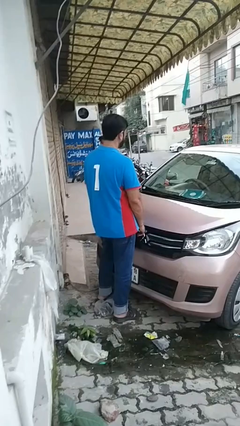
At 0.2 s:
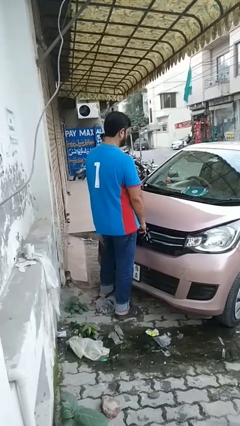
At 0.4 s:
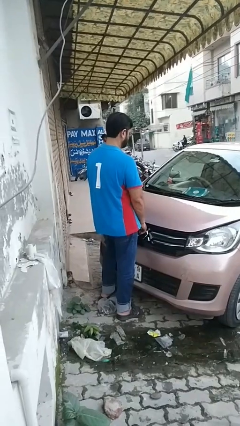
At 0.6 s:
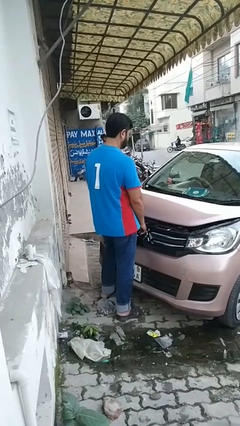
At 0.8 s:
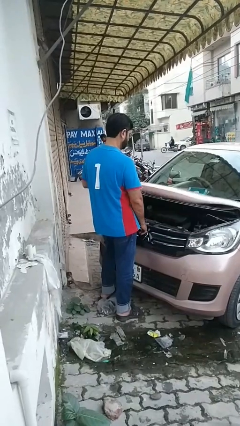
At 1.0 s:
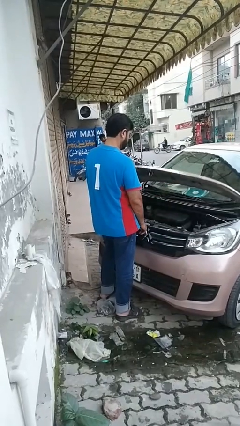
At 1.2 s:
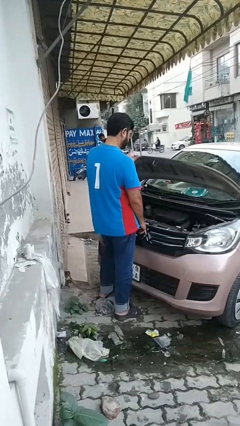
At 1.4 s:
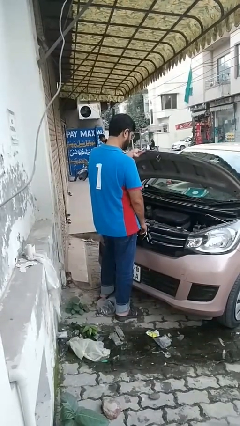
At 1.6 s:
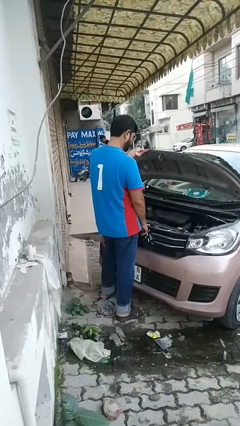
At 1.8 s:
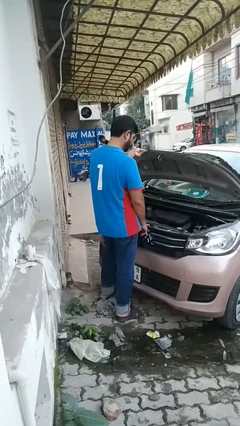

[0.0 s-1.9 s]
person opens car hood

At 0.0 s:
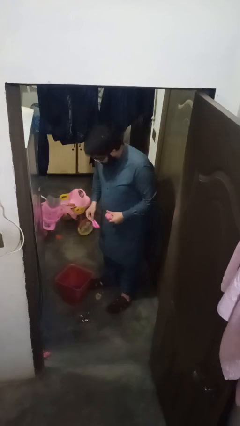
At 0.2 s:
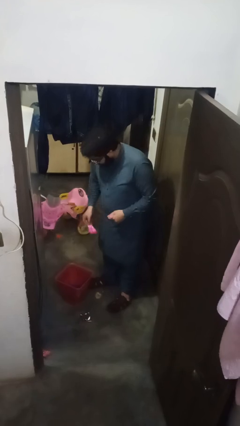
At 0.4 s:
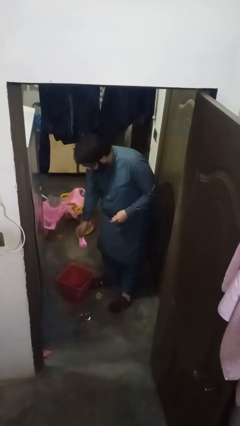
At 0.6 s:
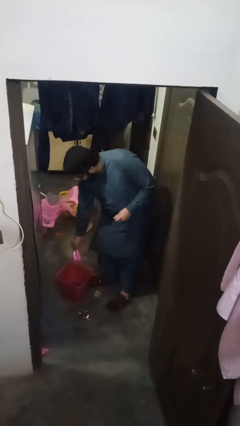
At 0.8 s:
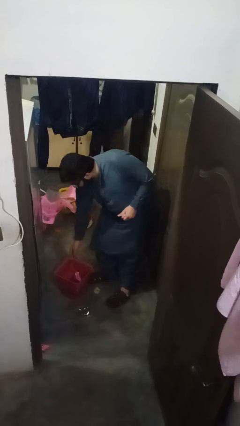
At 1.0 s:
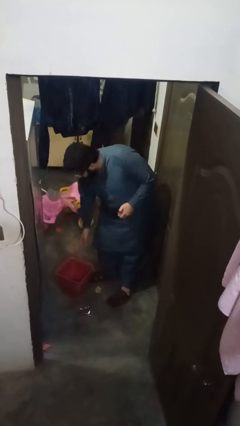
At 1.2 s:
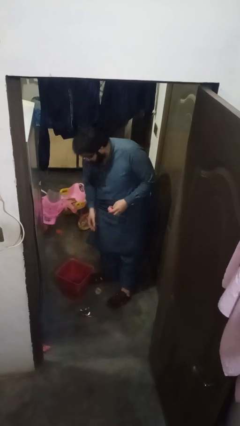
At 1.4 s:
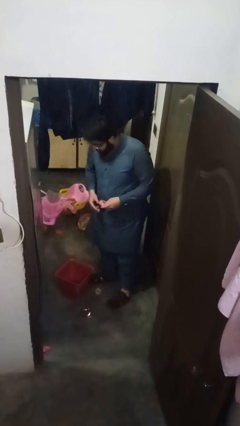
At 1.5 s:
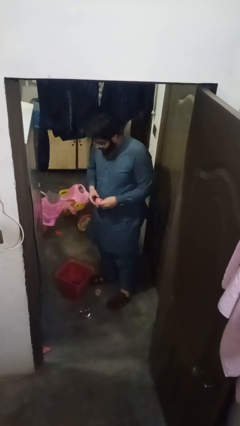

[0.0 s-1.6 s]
person discards trash

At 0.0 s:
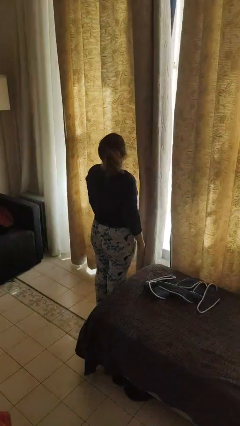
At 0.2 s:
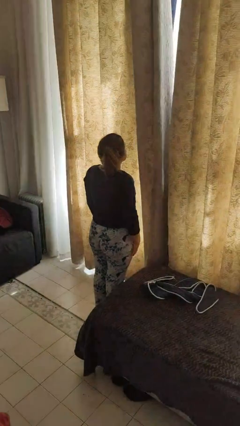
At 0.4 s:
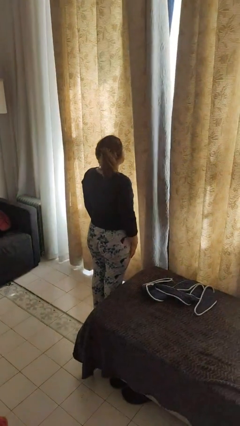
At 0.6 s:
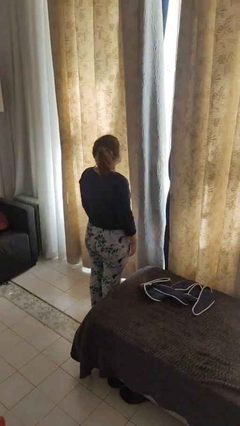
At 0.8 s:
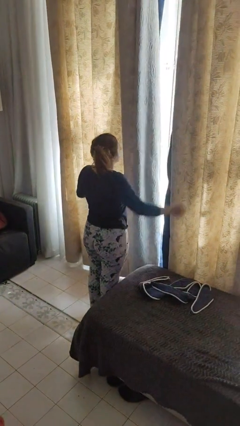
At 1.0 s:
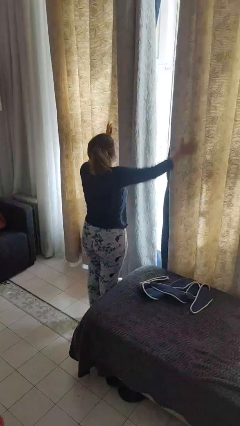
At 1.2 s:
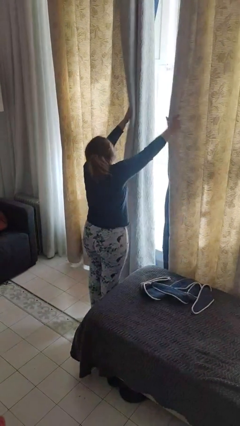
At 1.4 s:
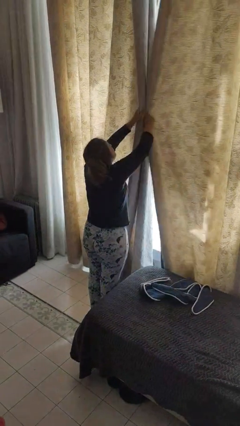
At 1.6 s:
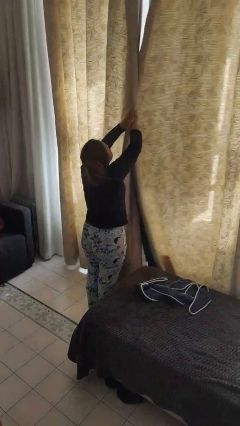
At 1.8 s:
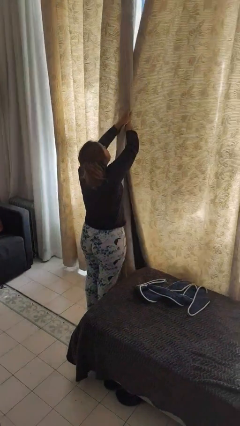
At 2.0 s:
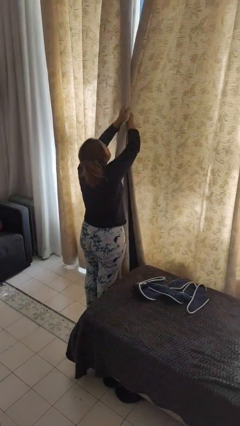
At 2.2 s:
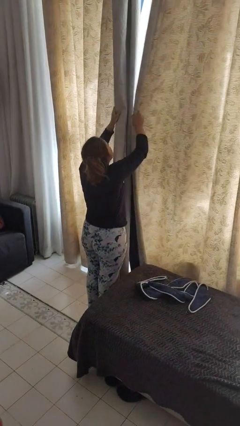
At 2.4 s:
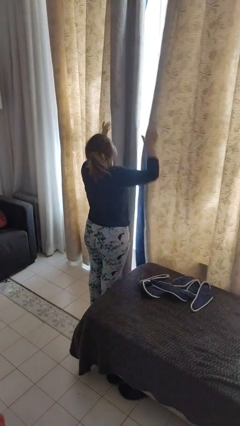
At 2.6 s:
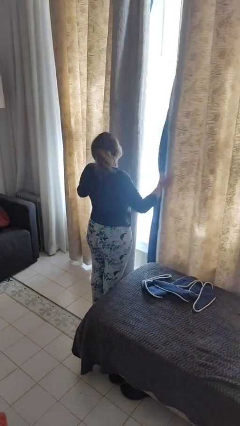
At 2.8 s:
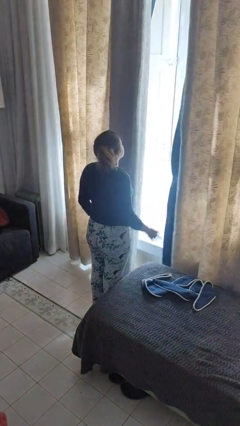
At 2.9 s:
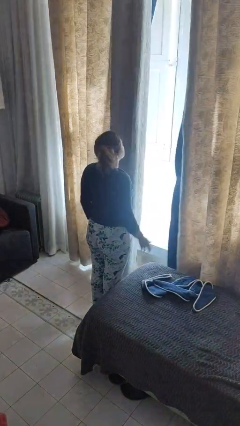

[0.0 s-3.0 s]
person closes curtains

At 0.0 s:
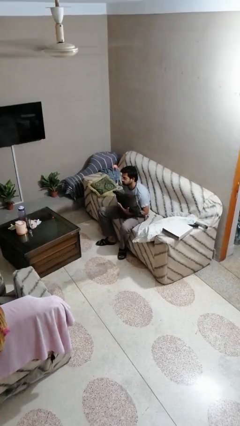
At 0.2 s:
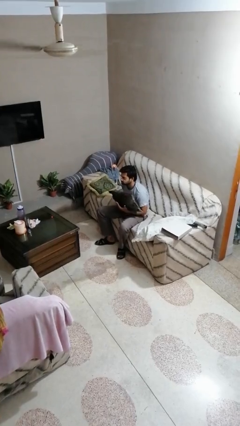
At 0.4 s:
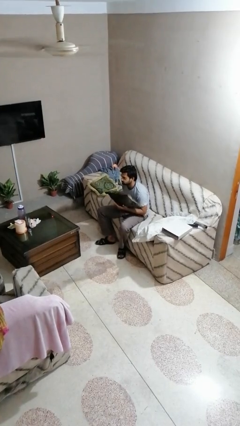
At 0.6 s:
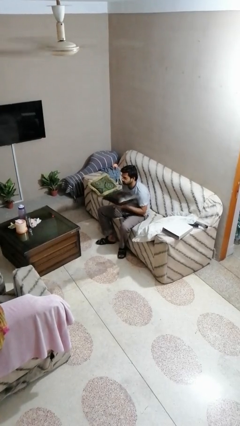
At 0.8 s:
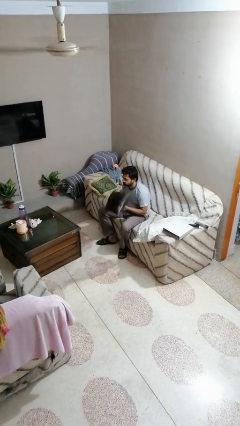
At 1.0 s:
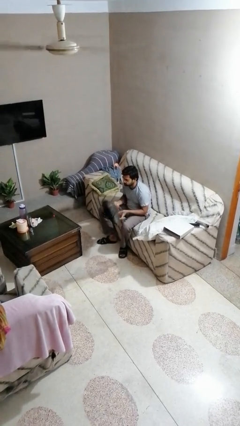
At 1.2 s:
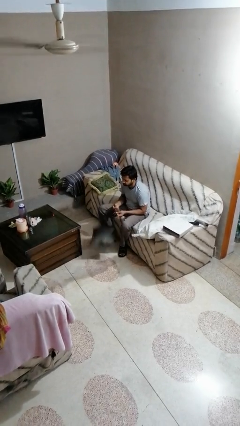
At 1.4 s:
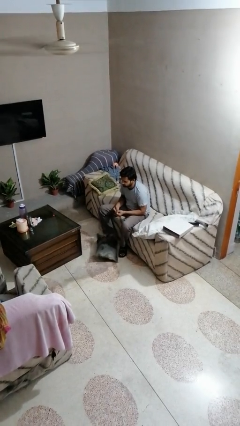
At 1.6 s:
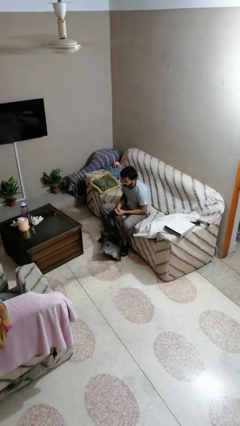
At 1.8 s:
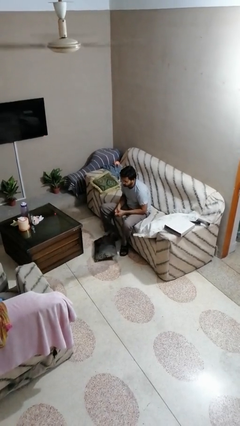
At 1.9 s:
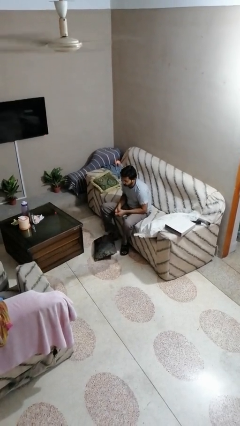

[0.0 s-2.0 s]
person drops object

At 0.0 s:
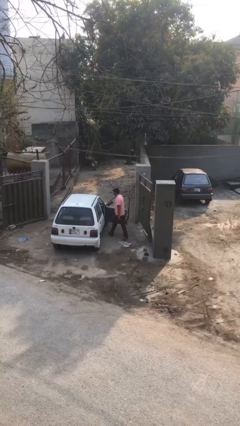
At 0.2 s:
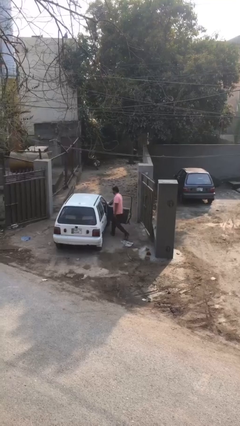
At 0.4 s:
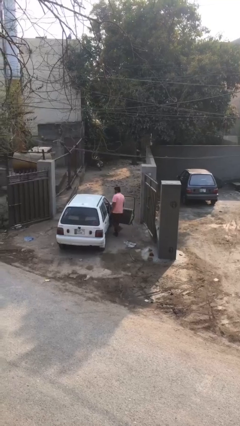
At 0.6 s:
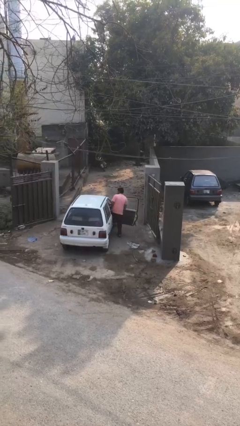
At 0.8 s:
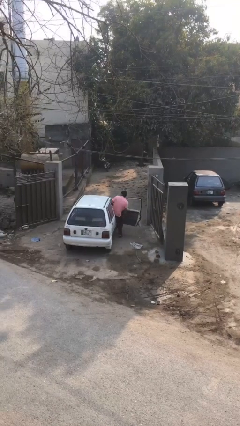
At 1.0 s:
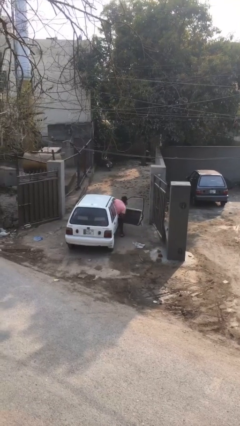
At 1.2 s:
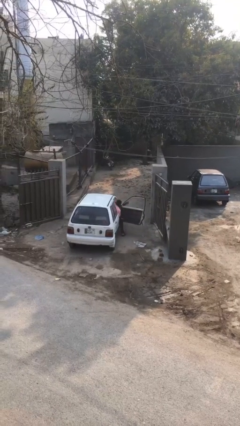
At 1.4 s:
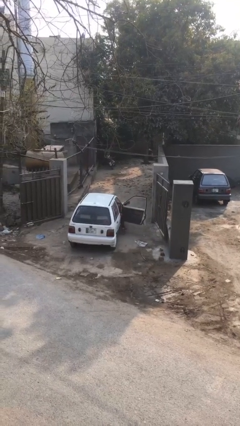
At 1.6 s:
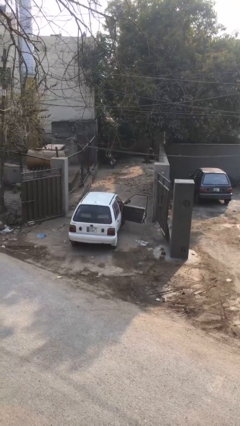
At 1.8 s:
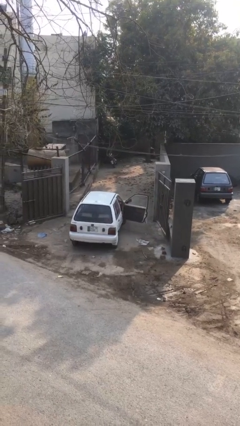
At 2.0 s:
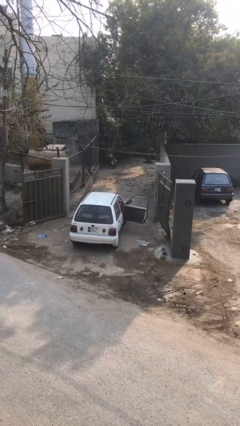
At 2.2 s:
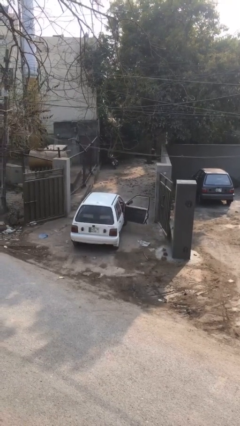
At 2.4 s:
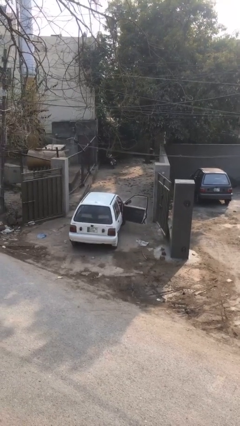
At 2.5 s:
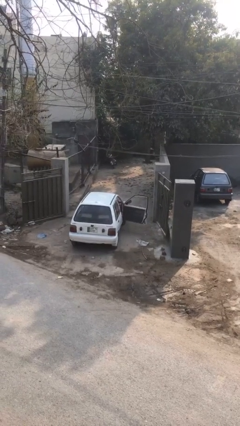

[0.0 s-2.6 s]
person enters car

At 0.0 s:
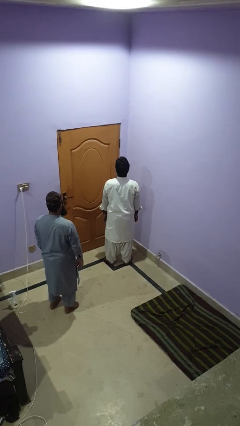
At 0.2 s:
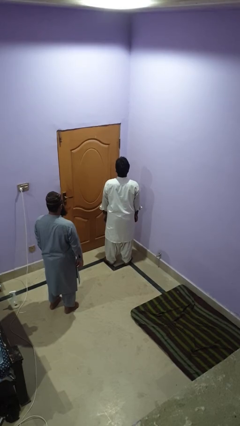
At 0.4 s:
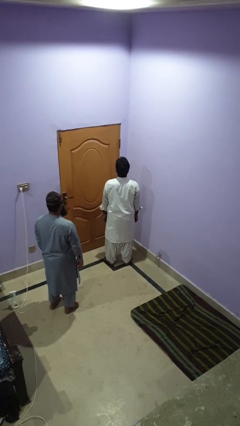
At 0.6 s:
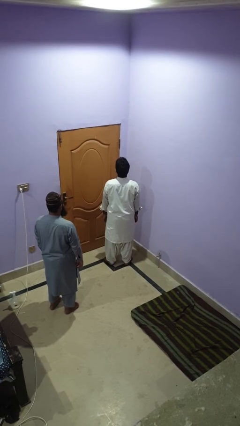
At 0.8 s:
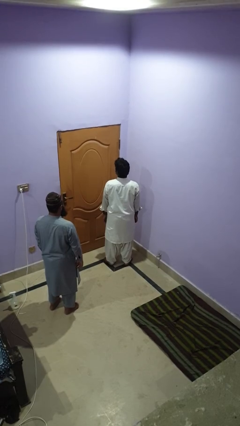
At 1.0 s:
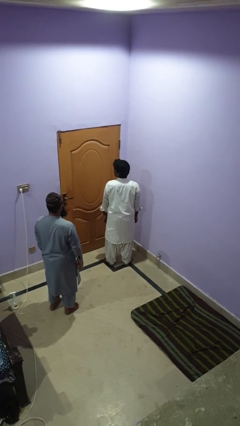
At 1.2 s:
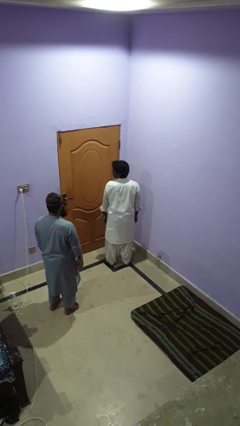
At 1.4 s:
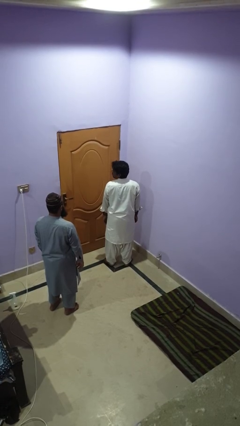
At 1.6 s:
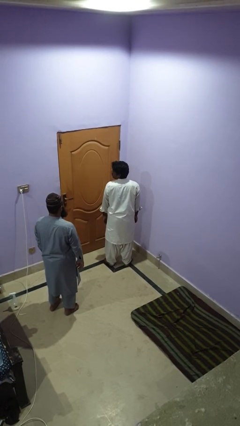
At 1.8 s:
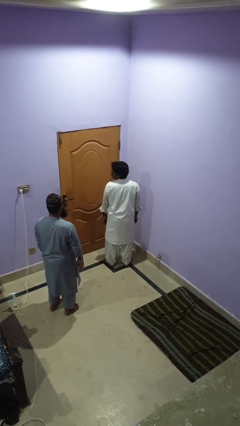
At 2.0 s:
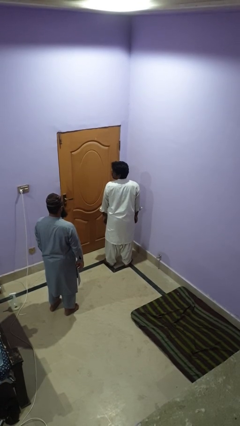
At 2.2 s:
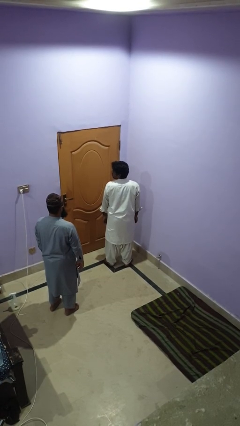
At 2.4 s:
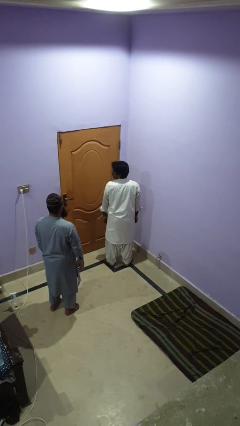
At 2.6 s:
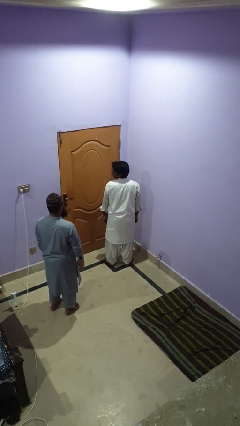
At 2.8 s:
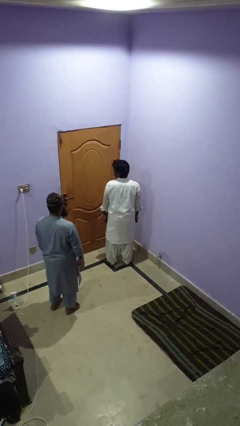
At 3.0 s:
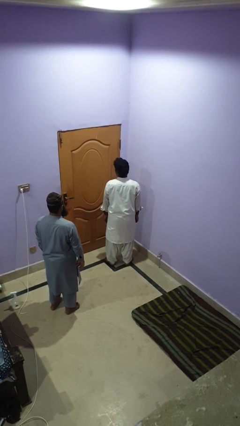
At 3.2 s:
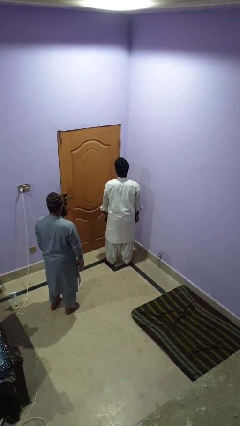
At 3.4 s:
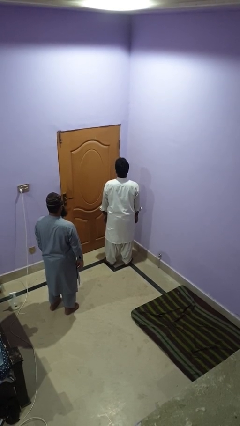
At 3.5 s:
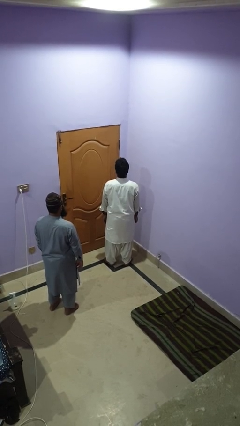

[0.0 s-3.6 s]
person looks over shoulder

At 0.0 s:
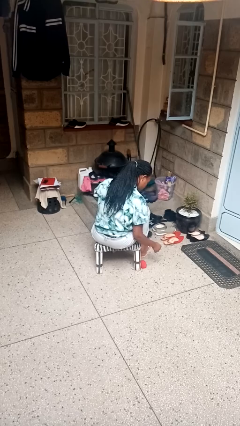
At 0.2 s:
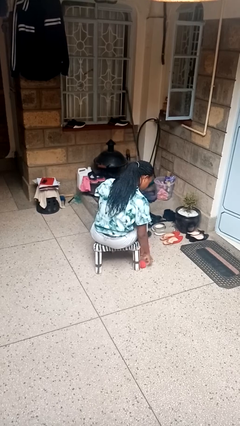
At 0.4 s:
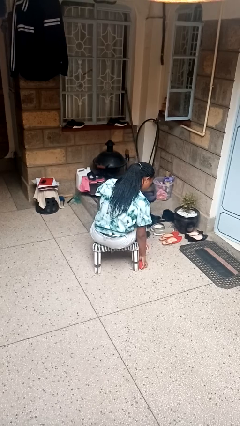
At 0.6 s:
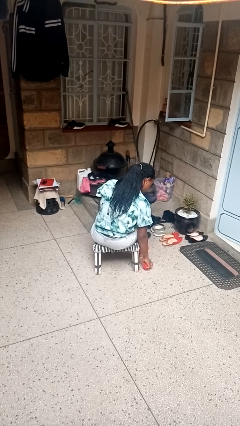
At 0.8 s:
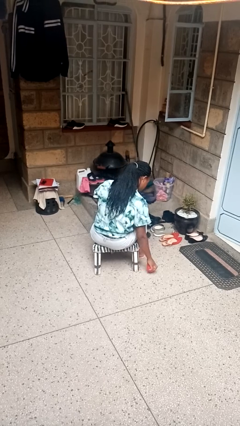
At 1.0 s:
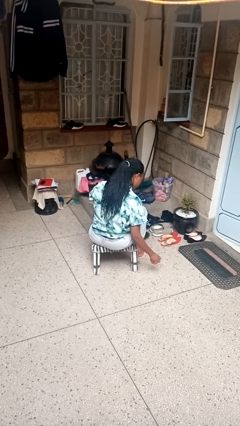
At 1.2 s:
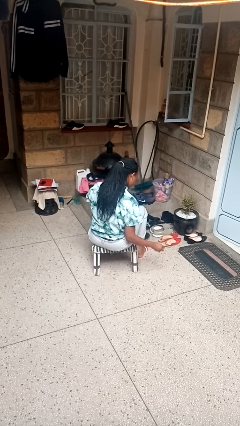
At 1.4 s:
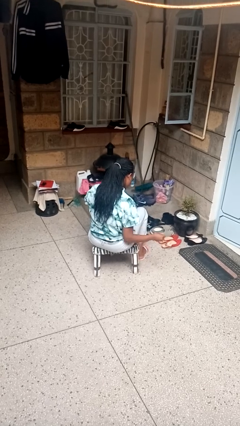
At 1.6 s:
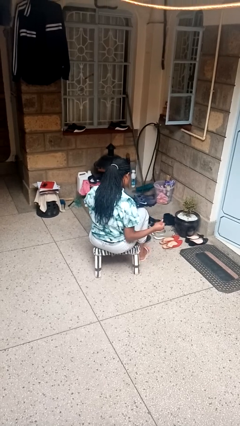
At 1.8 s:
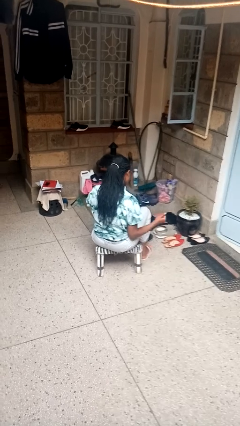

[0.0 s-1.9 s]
person picks up object from floor

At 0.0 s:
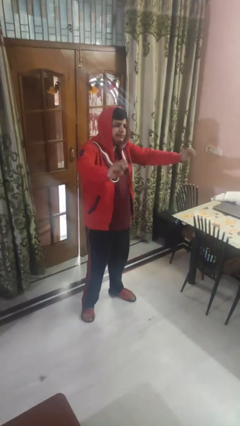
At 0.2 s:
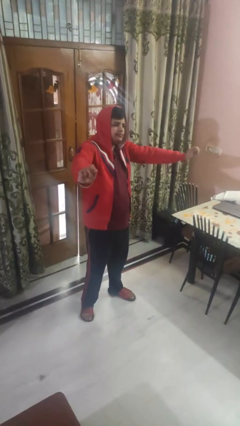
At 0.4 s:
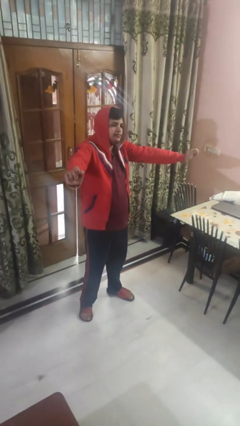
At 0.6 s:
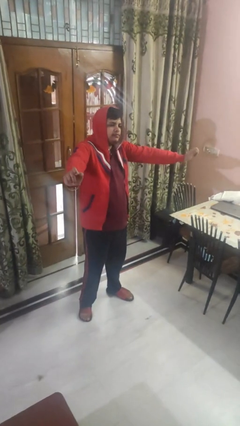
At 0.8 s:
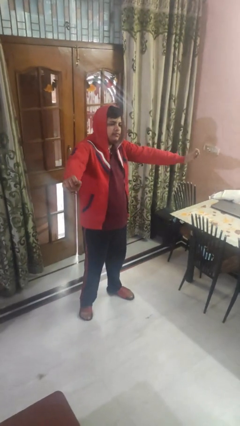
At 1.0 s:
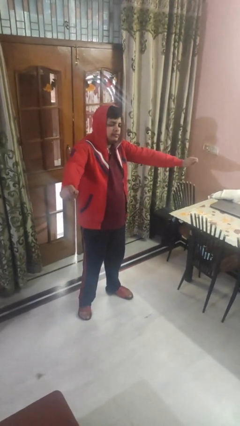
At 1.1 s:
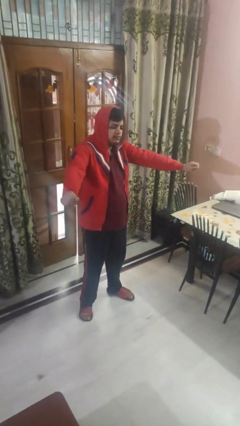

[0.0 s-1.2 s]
person gestures zoom in
